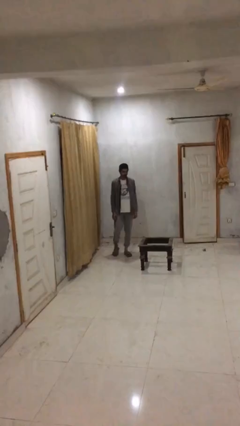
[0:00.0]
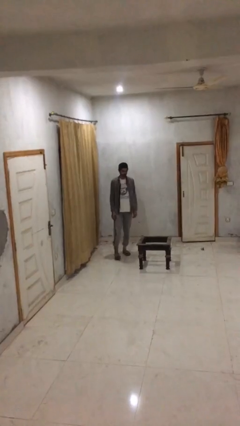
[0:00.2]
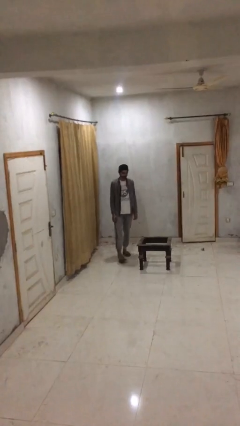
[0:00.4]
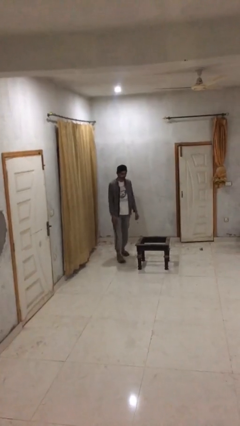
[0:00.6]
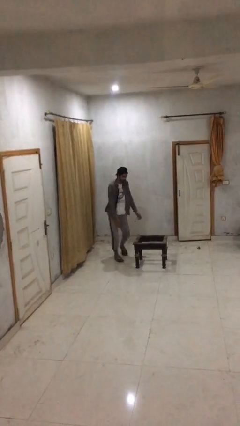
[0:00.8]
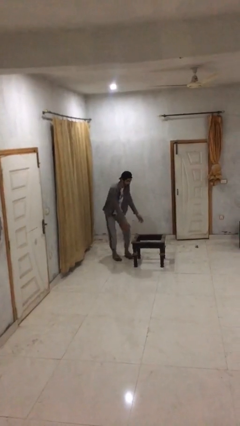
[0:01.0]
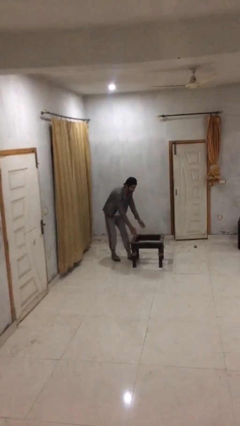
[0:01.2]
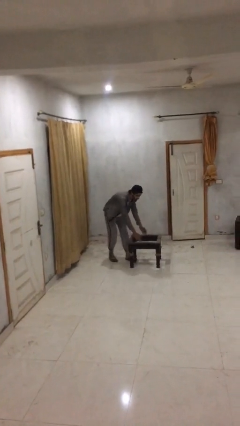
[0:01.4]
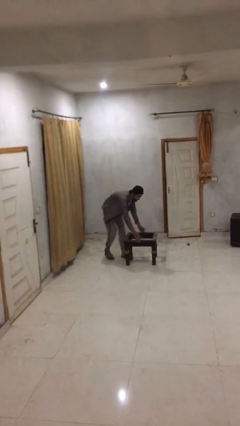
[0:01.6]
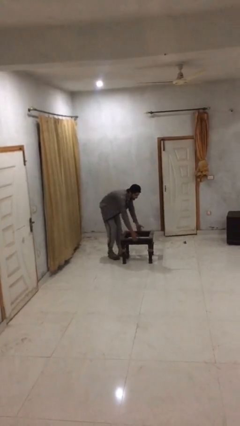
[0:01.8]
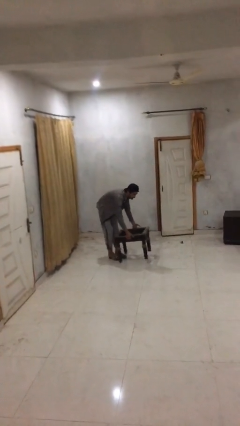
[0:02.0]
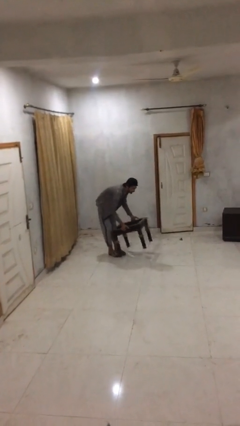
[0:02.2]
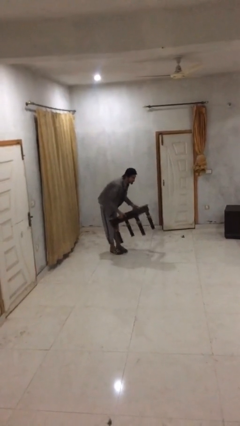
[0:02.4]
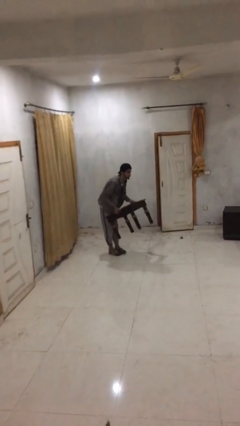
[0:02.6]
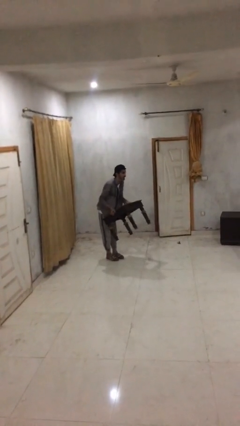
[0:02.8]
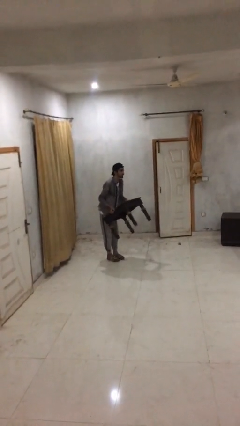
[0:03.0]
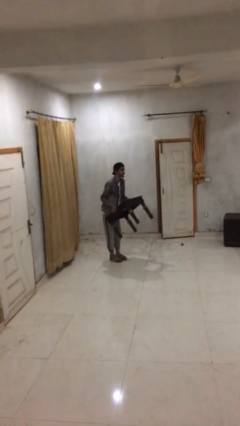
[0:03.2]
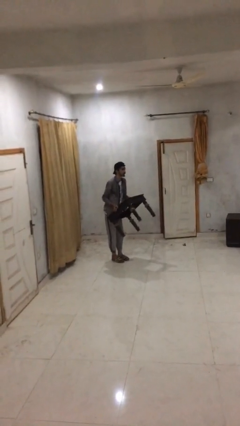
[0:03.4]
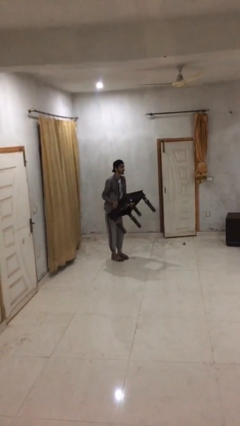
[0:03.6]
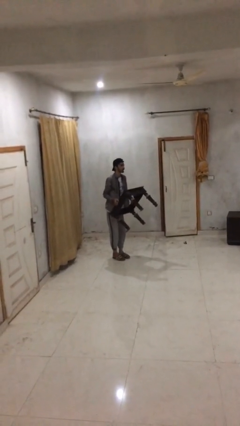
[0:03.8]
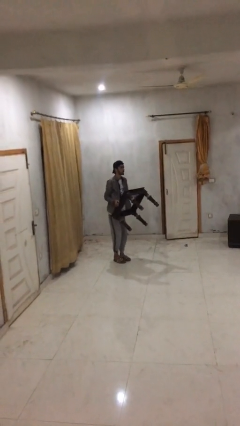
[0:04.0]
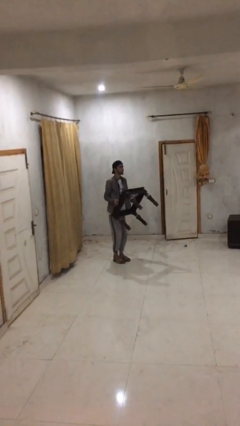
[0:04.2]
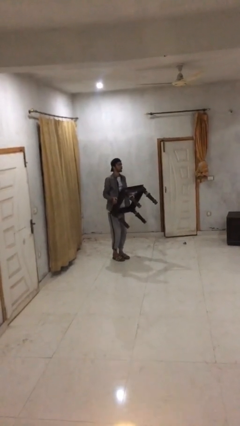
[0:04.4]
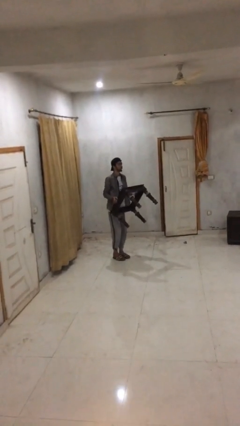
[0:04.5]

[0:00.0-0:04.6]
person picks up object from floor

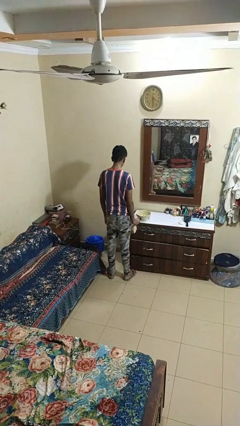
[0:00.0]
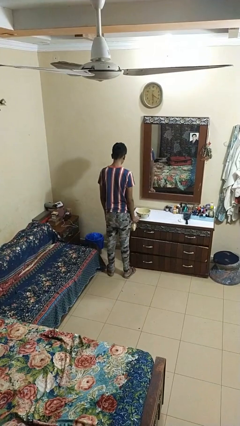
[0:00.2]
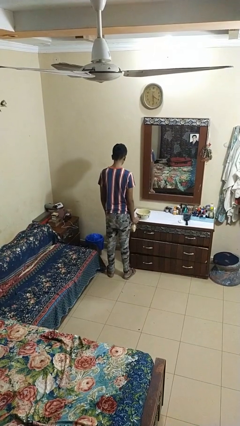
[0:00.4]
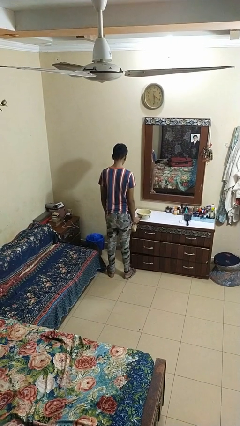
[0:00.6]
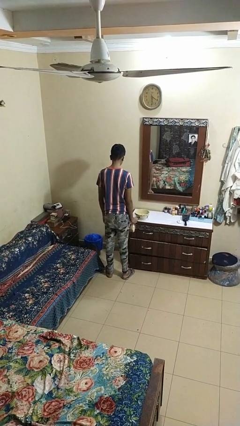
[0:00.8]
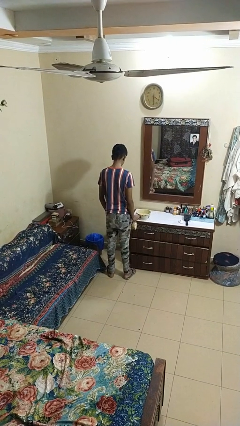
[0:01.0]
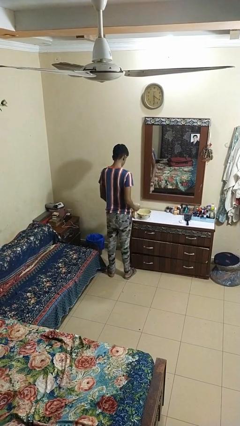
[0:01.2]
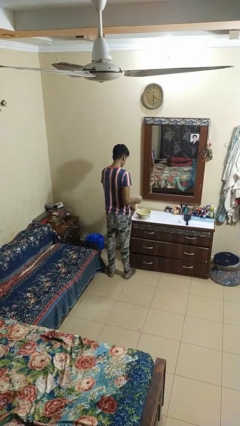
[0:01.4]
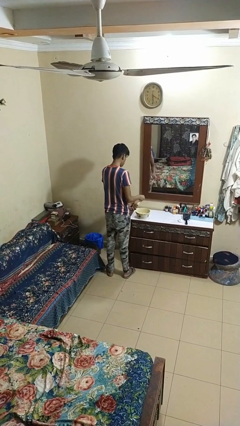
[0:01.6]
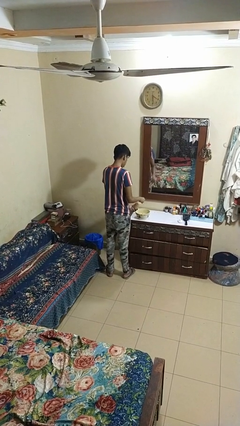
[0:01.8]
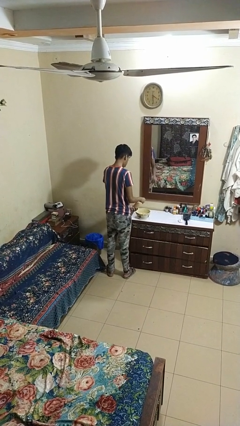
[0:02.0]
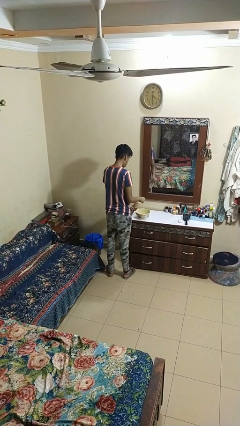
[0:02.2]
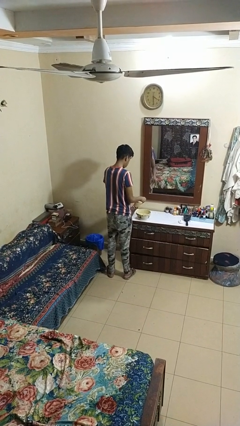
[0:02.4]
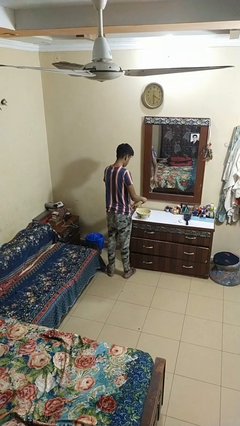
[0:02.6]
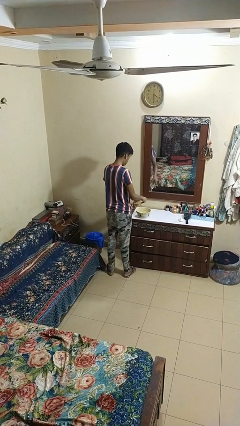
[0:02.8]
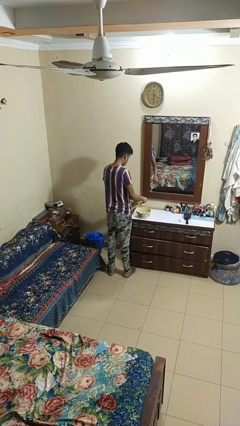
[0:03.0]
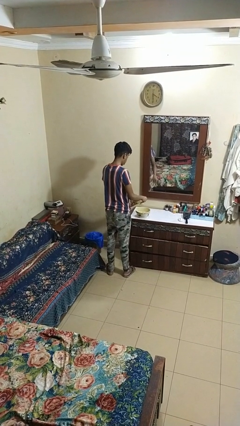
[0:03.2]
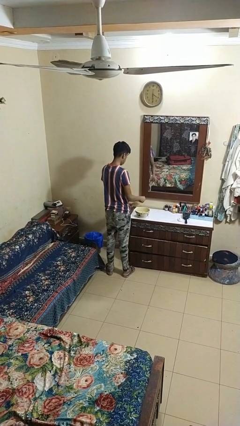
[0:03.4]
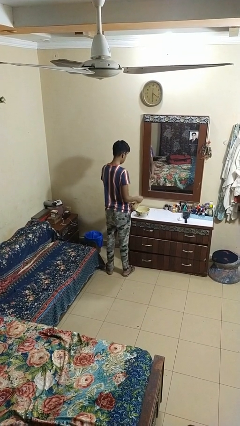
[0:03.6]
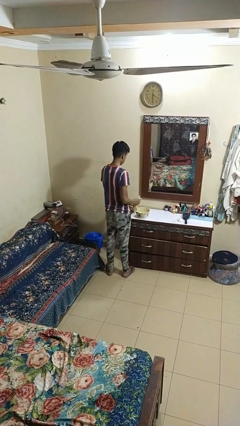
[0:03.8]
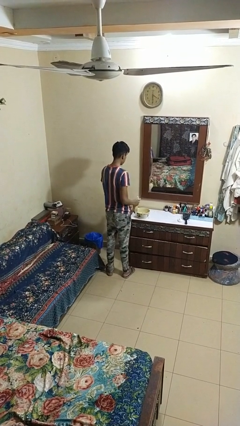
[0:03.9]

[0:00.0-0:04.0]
person pours into bowl

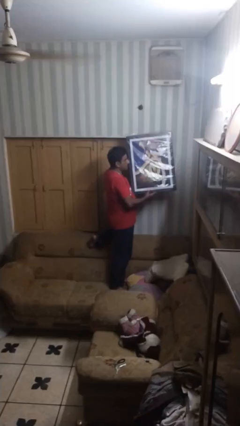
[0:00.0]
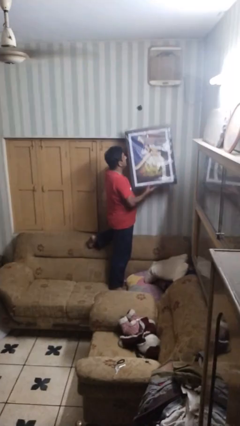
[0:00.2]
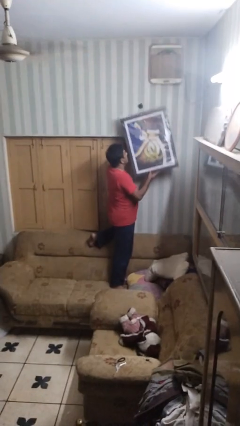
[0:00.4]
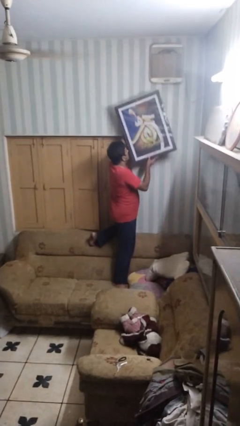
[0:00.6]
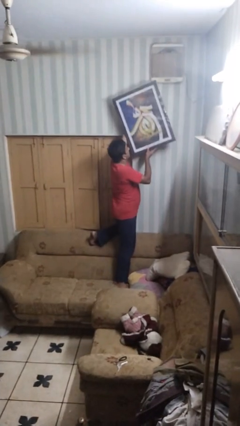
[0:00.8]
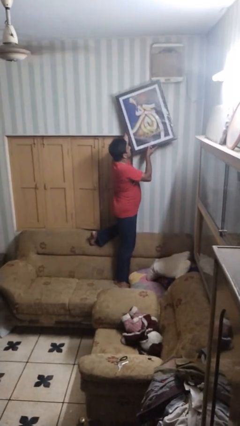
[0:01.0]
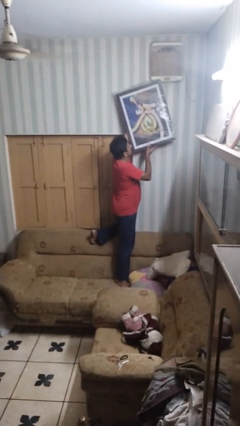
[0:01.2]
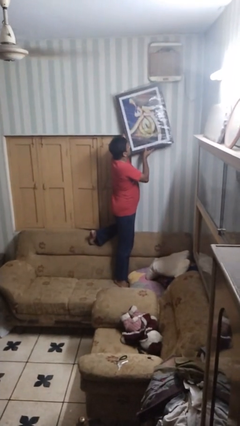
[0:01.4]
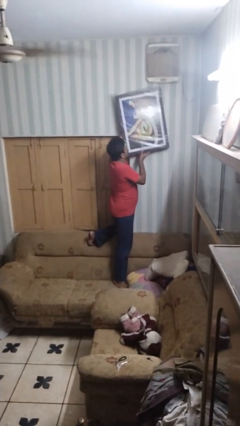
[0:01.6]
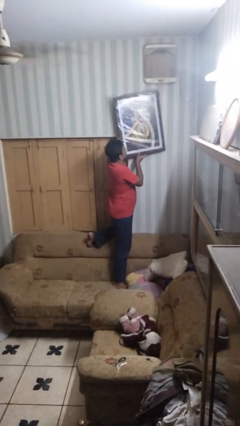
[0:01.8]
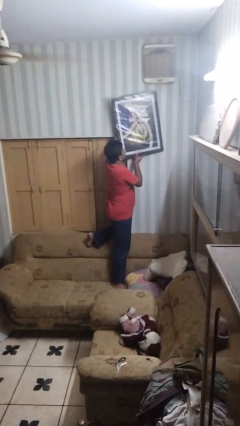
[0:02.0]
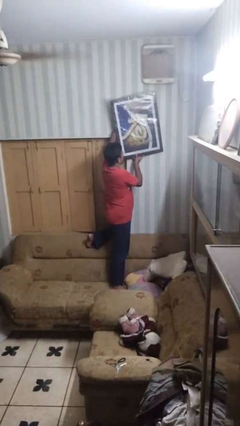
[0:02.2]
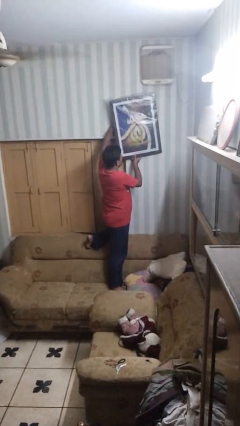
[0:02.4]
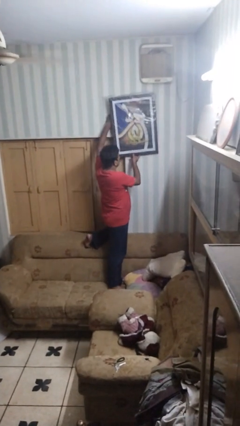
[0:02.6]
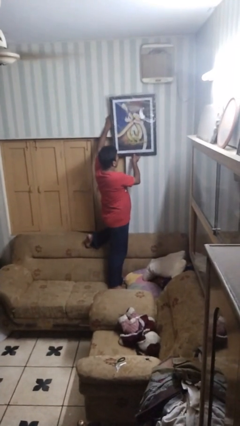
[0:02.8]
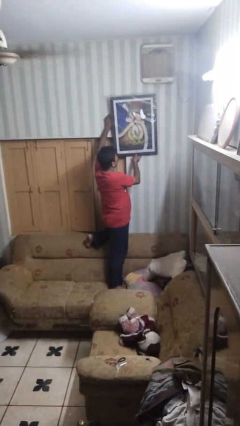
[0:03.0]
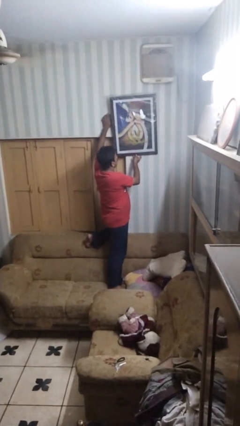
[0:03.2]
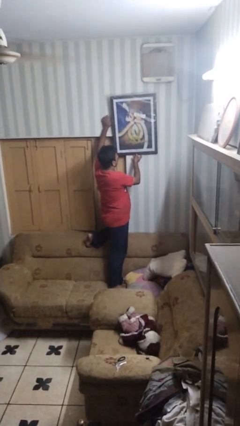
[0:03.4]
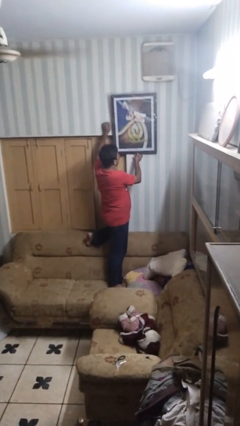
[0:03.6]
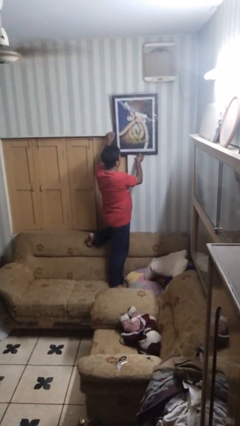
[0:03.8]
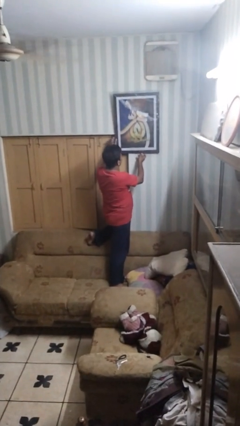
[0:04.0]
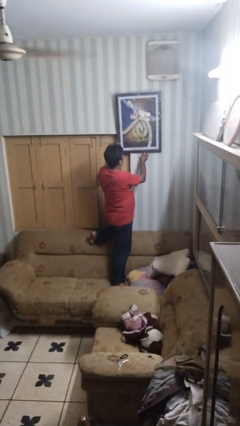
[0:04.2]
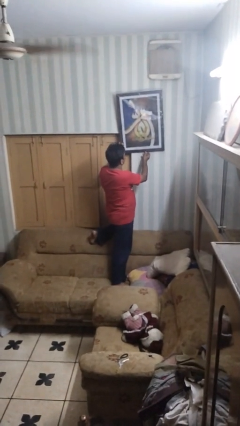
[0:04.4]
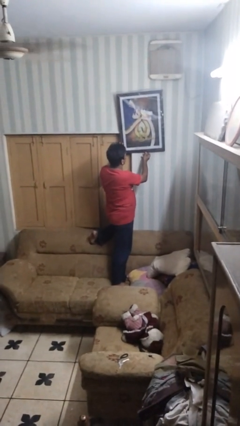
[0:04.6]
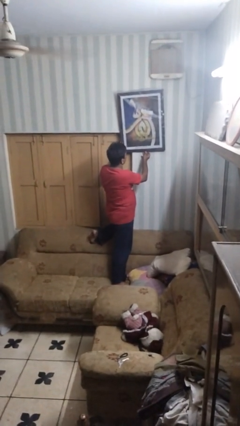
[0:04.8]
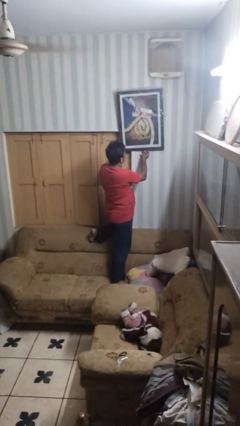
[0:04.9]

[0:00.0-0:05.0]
person puts up picture frame

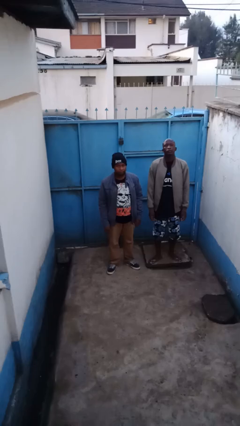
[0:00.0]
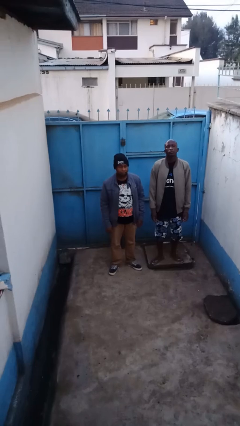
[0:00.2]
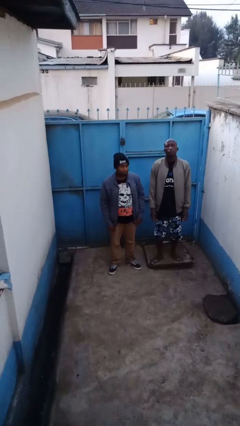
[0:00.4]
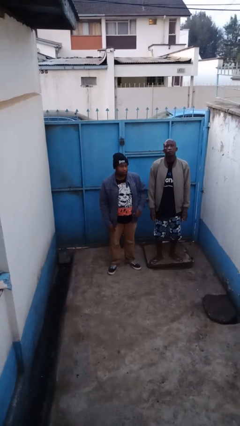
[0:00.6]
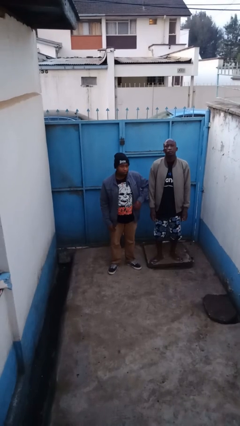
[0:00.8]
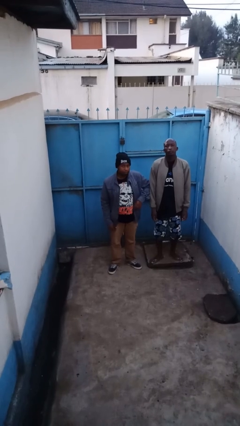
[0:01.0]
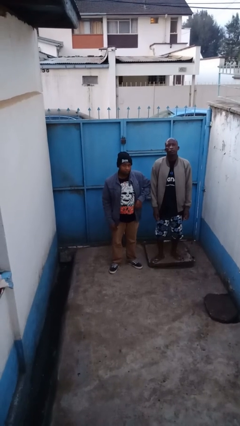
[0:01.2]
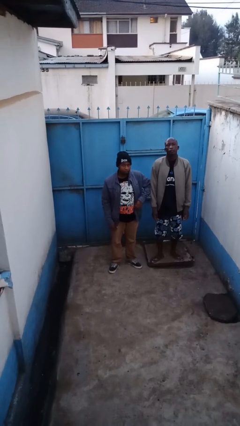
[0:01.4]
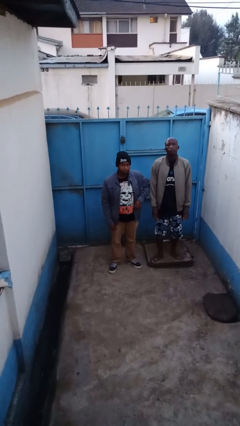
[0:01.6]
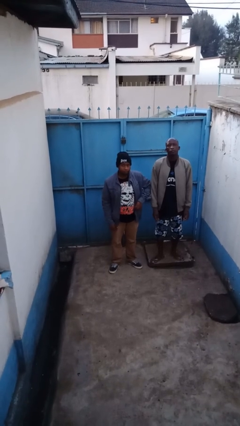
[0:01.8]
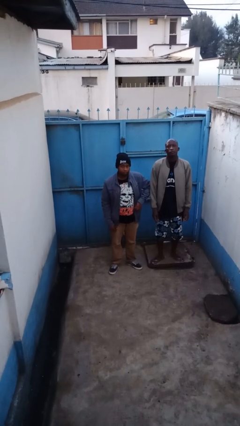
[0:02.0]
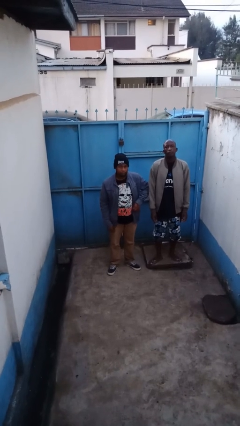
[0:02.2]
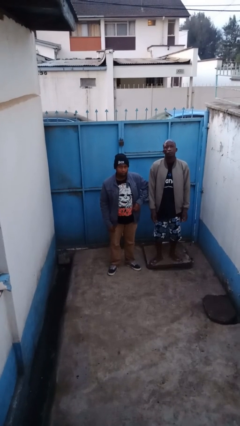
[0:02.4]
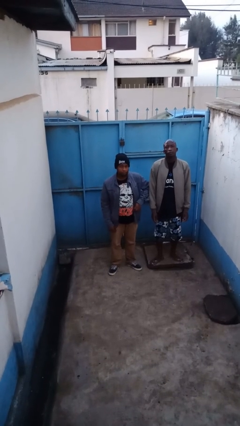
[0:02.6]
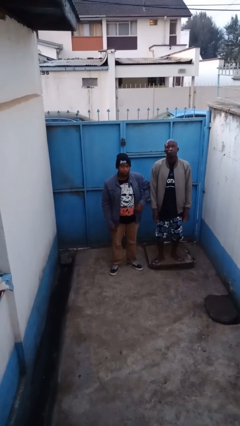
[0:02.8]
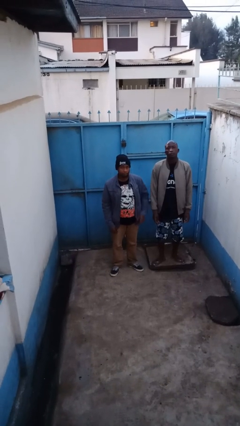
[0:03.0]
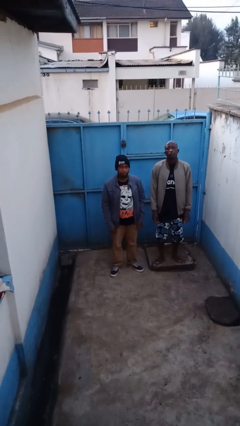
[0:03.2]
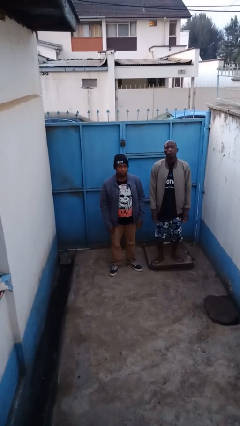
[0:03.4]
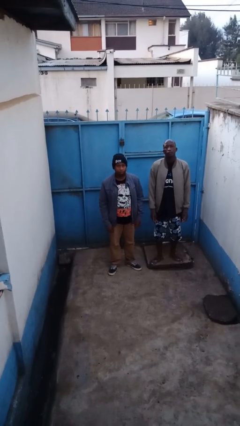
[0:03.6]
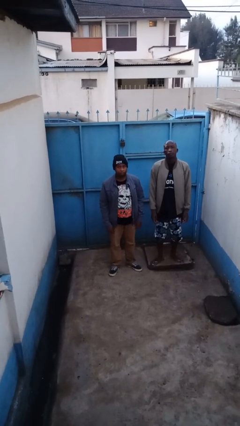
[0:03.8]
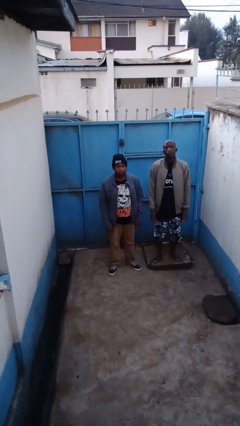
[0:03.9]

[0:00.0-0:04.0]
person nudges person with elbow
